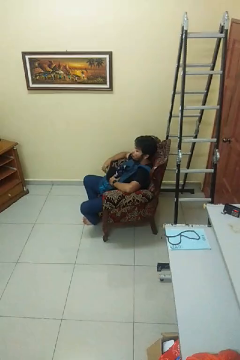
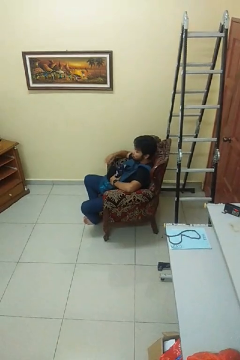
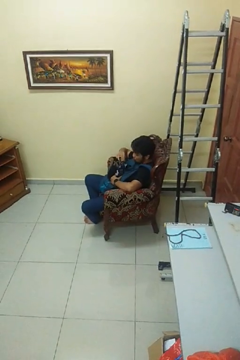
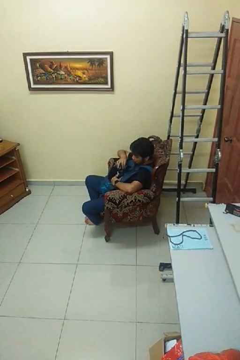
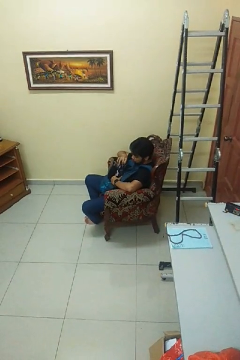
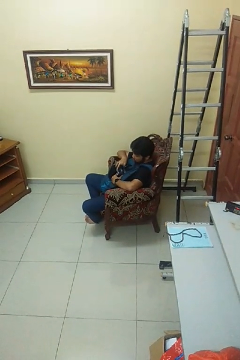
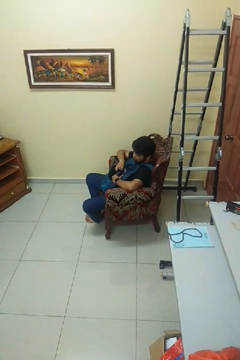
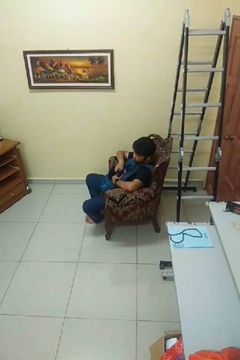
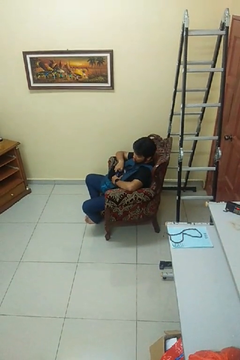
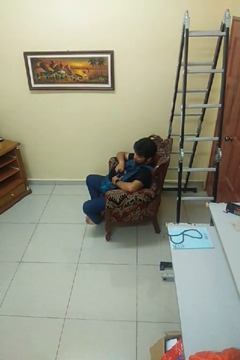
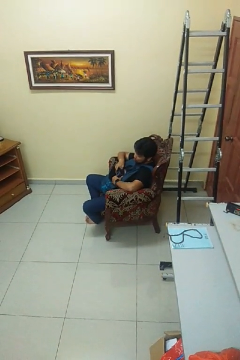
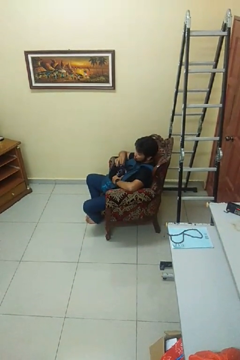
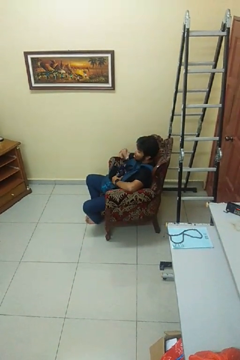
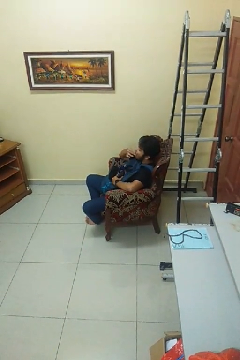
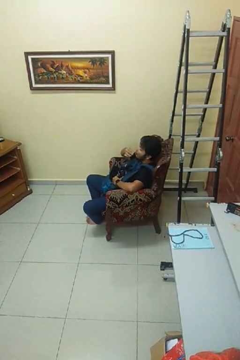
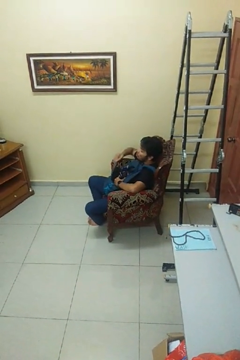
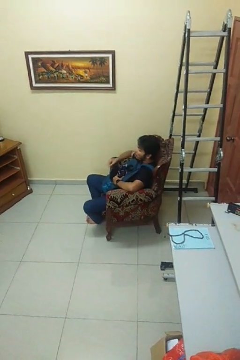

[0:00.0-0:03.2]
person eats snack from bag

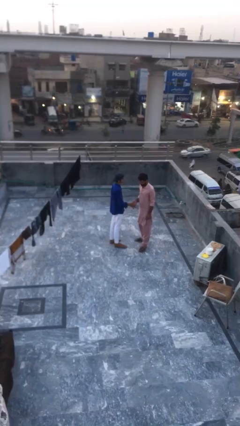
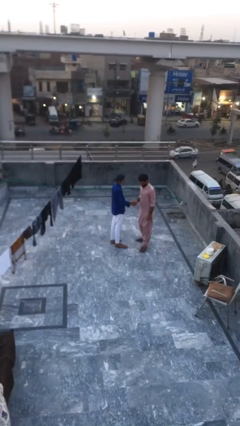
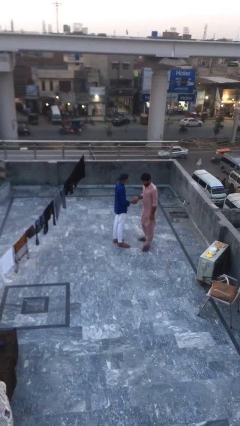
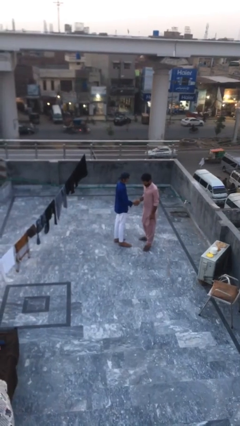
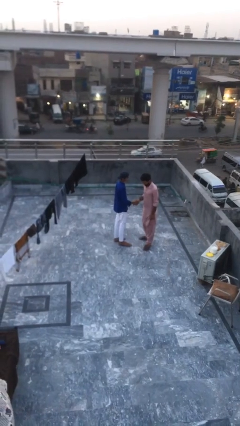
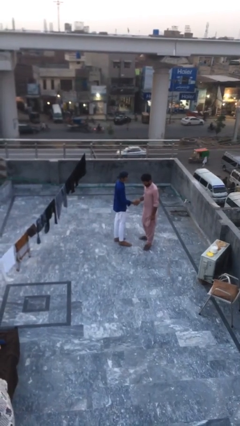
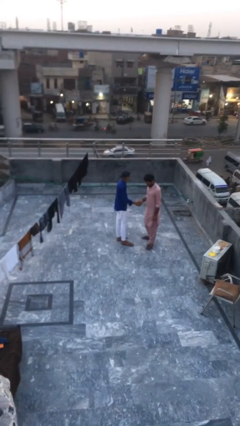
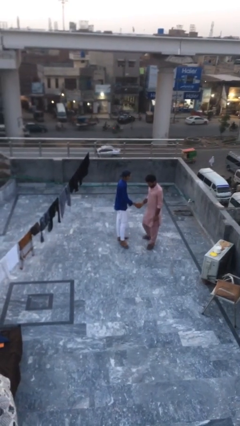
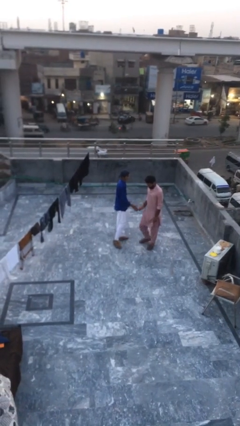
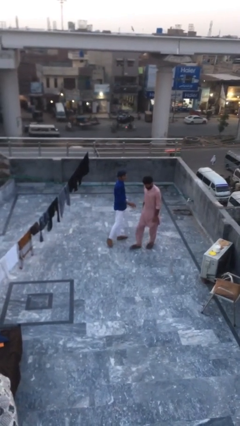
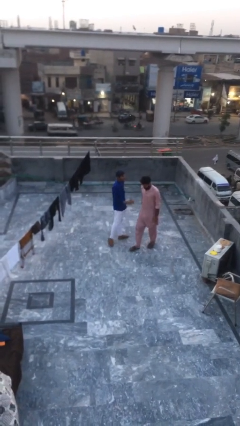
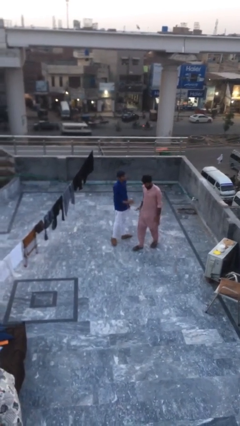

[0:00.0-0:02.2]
person shakes hand

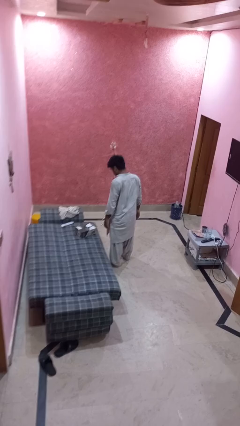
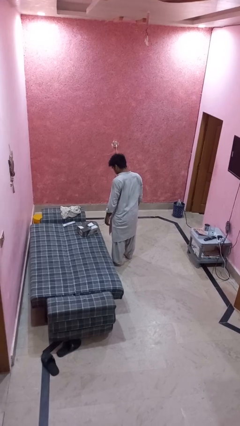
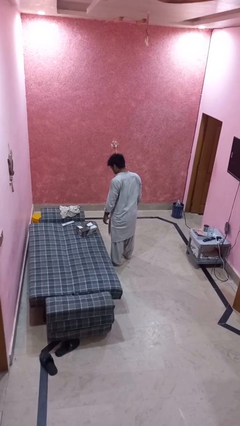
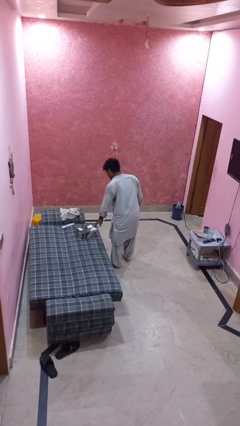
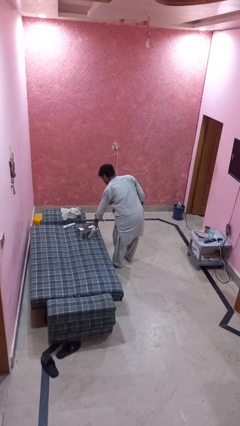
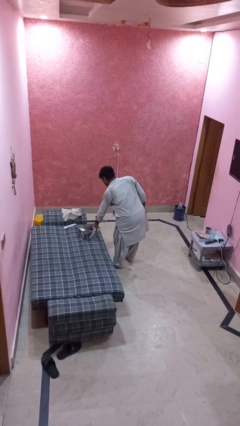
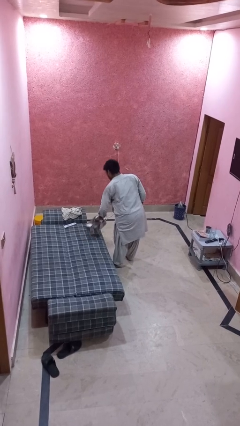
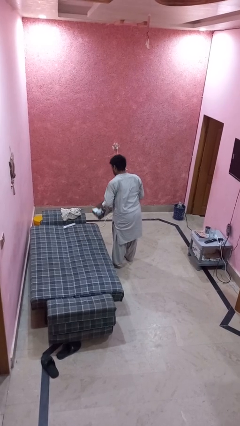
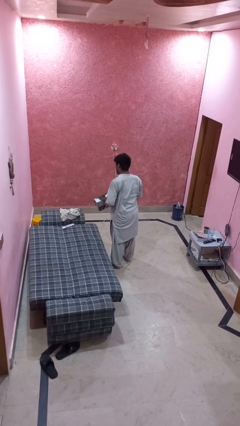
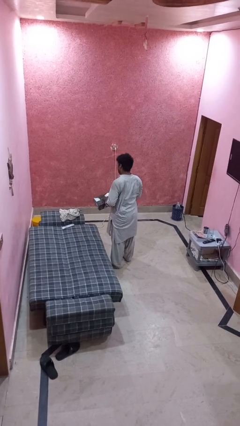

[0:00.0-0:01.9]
person picks up object from bed

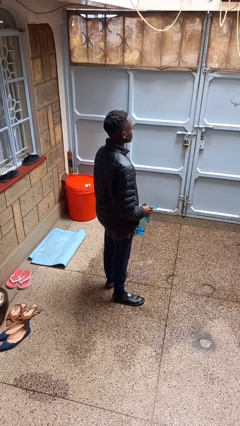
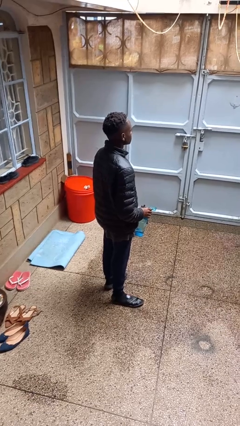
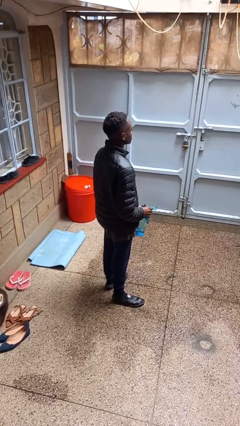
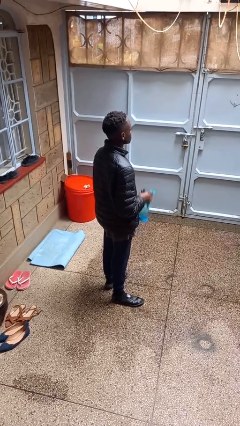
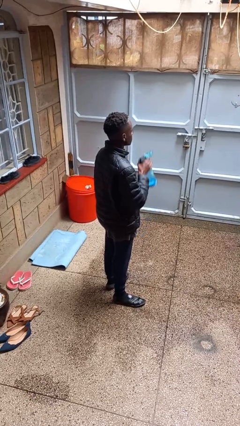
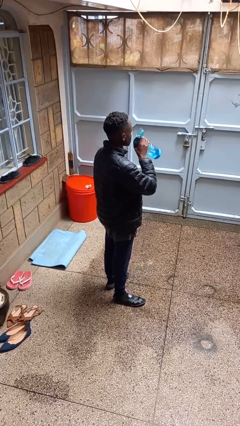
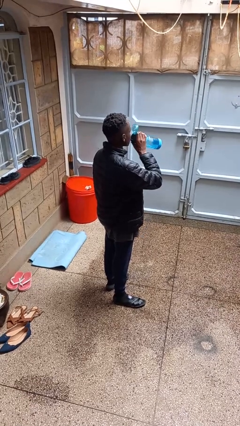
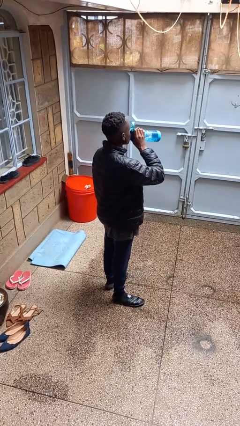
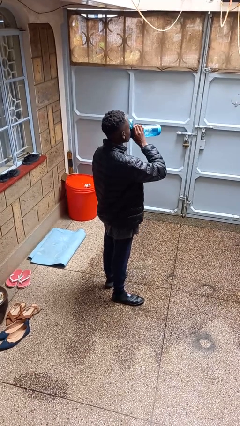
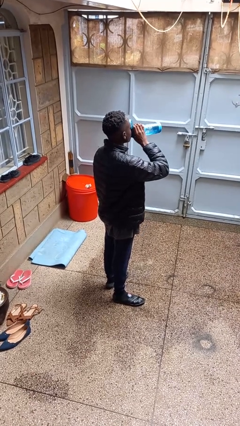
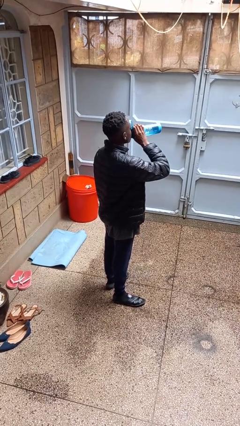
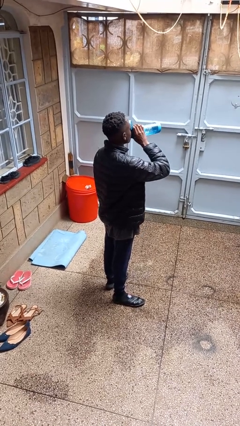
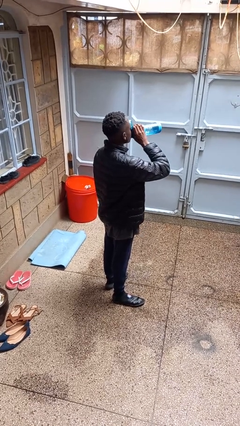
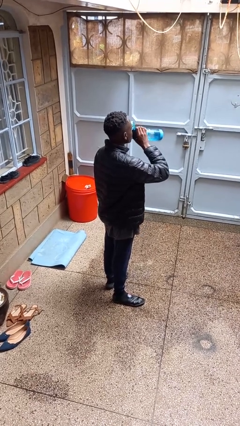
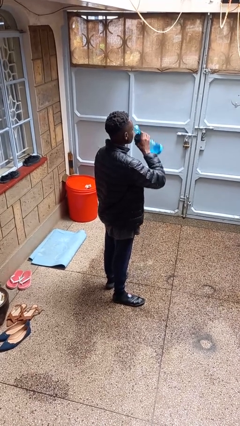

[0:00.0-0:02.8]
person drinks from bottle

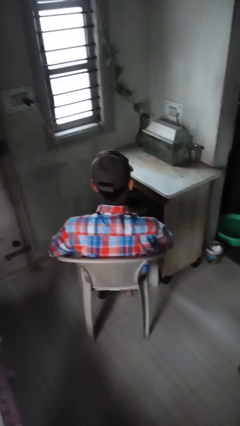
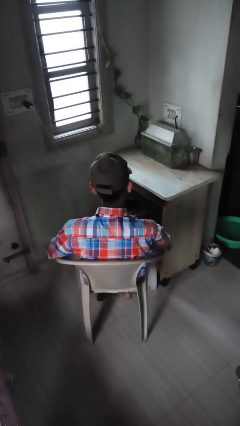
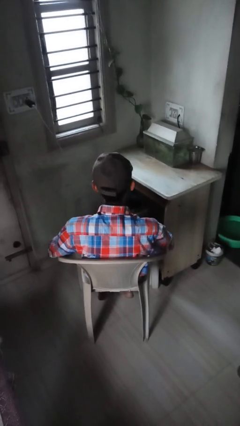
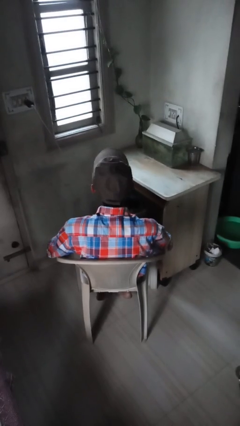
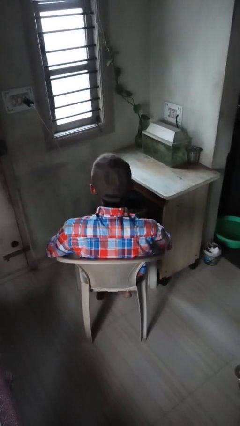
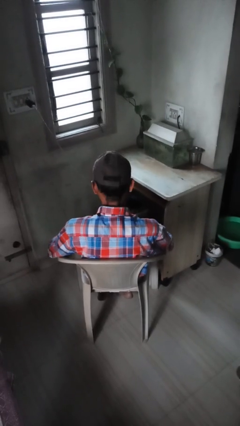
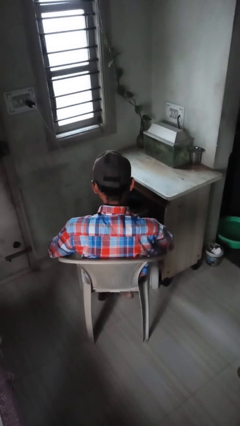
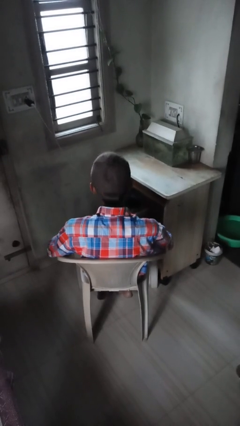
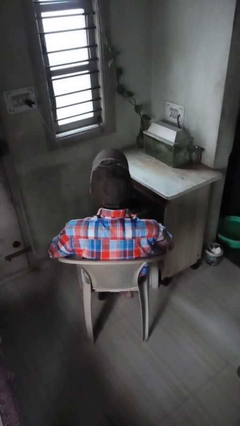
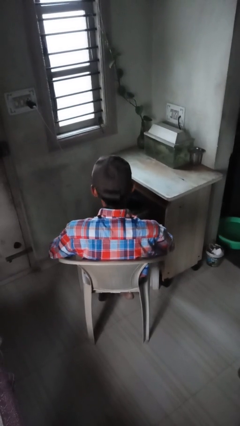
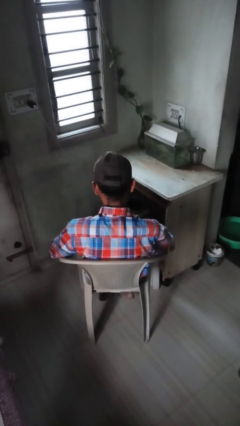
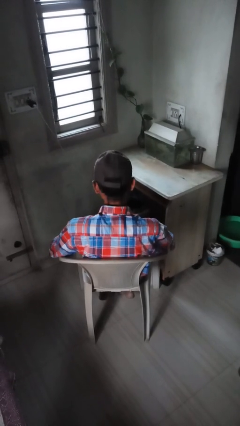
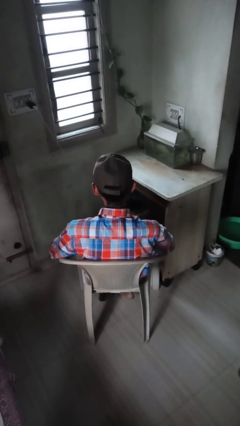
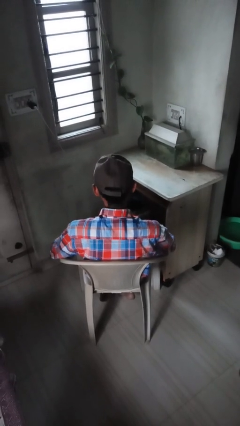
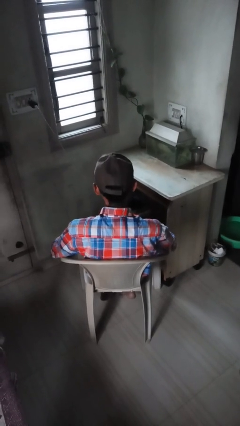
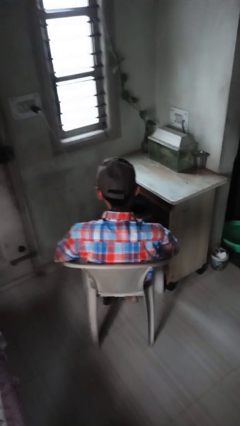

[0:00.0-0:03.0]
person nods head

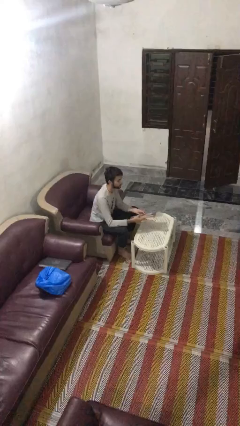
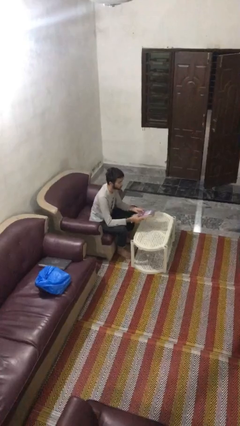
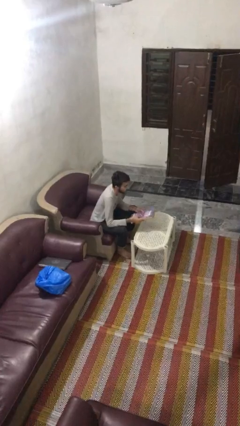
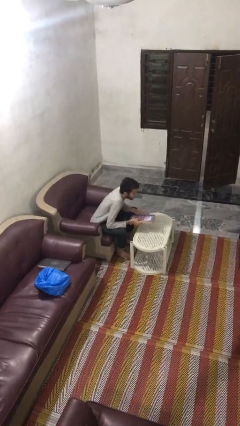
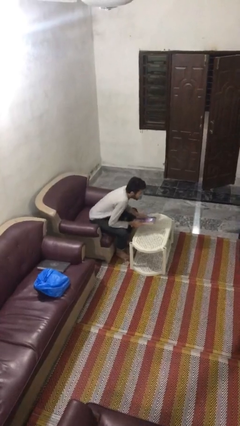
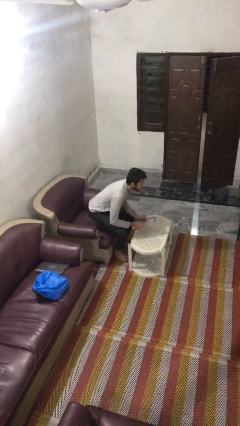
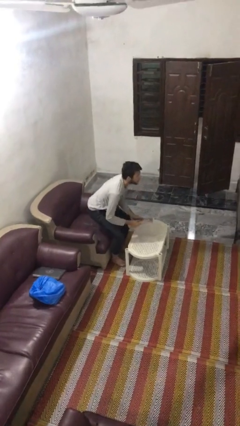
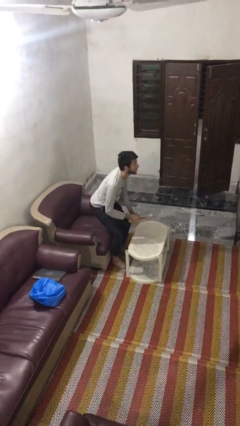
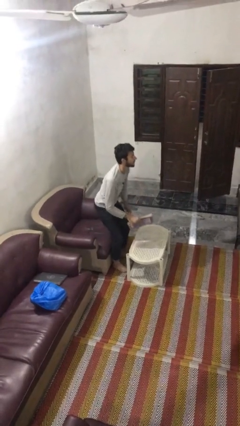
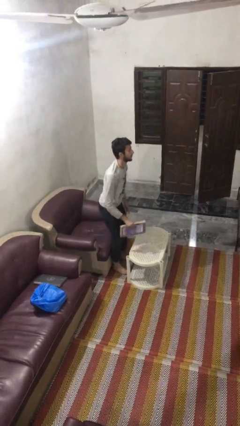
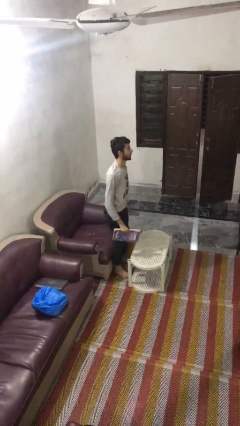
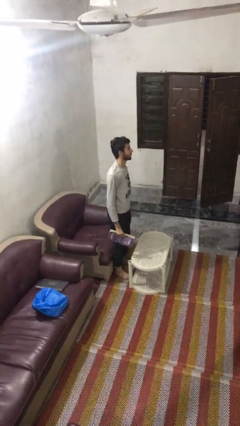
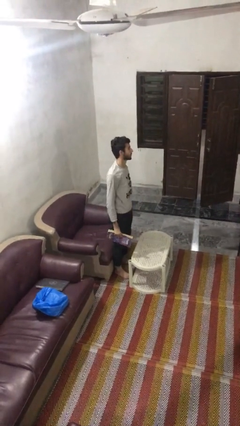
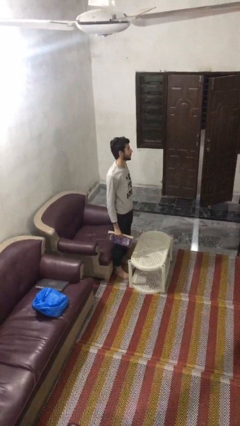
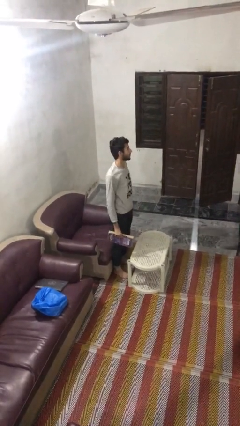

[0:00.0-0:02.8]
person stands up

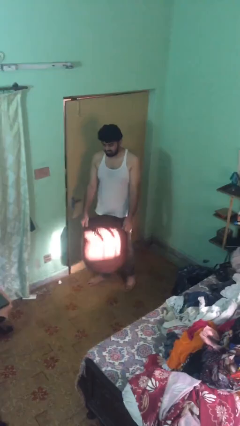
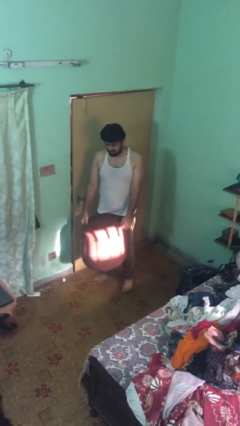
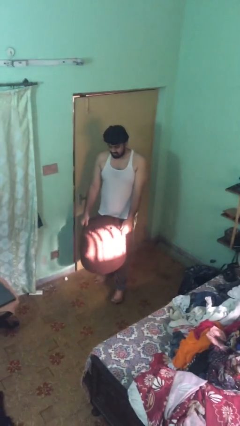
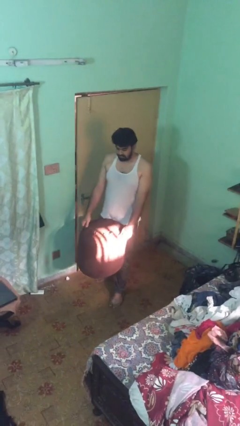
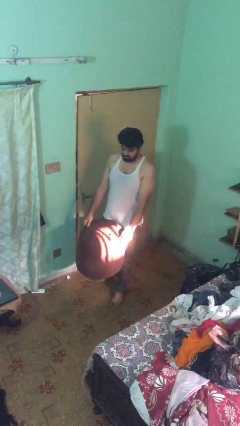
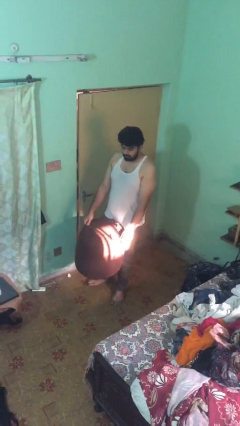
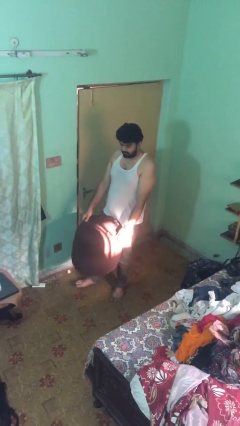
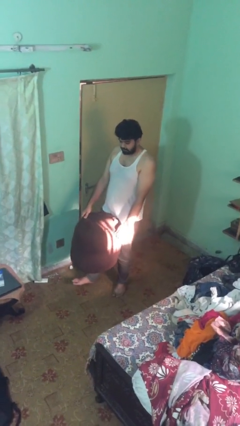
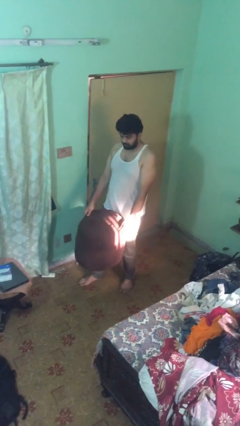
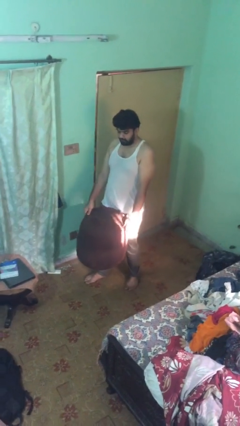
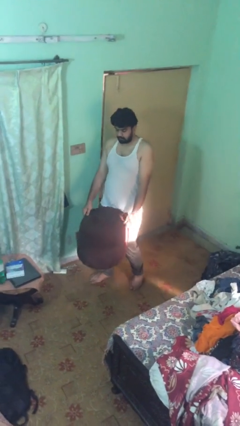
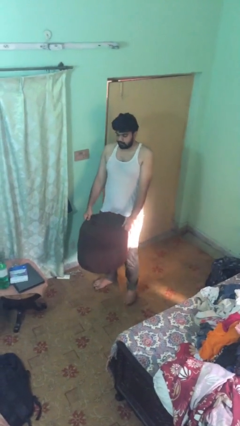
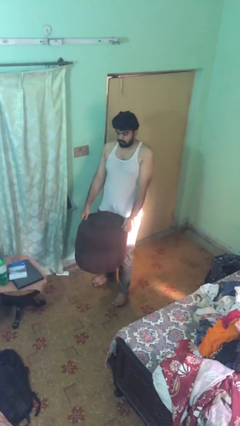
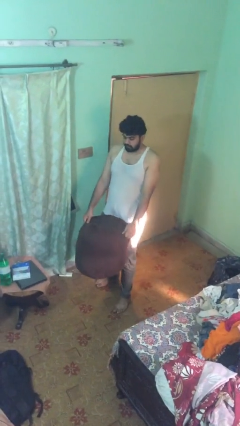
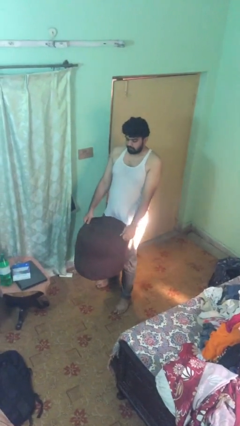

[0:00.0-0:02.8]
person carries heavy object
